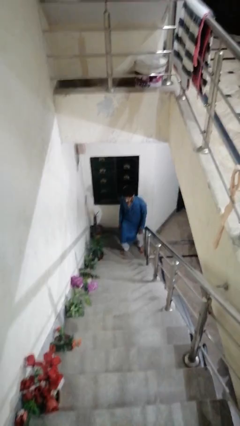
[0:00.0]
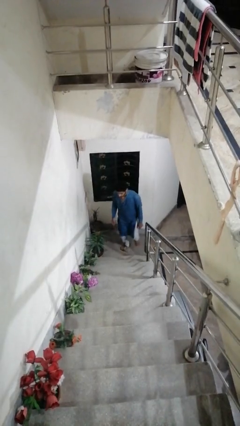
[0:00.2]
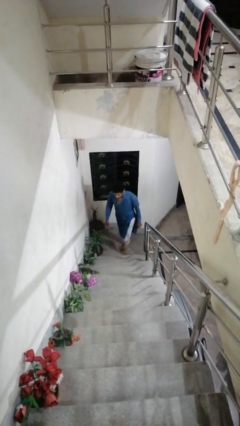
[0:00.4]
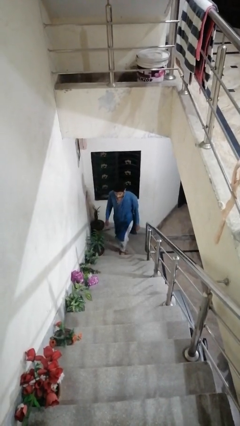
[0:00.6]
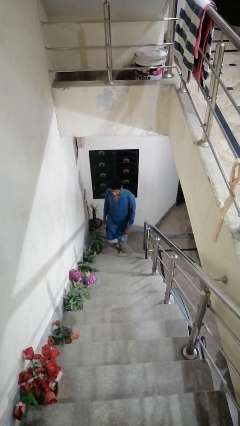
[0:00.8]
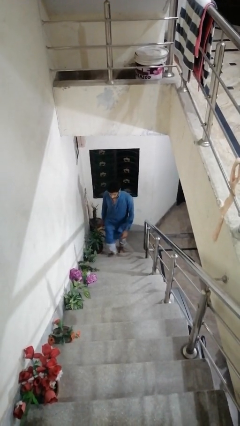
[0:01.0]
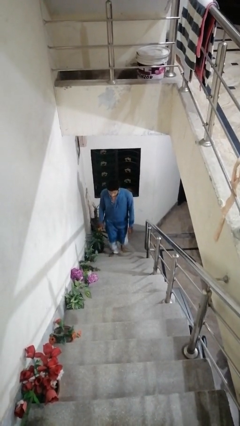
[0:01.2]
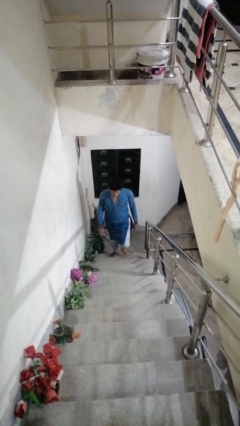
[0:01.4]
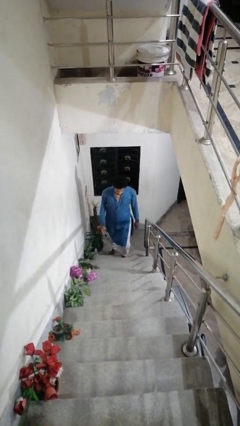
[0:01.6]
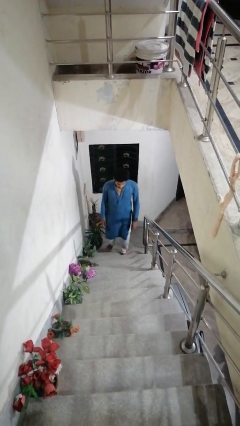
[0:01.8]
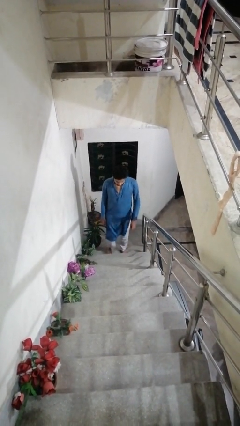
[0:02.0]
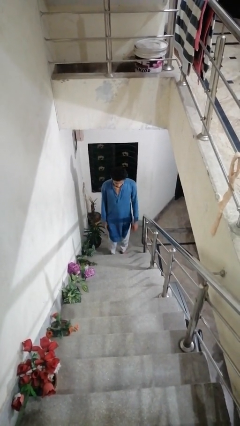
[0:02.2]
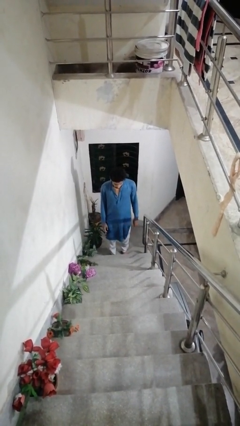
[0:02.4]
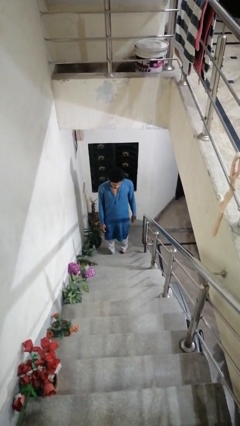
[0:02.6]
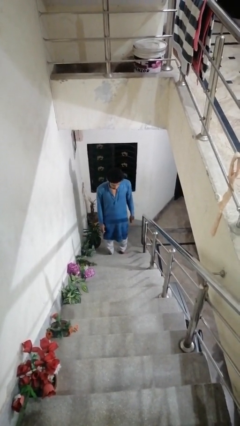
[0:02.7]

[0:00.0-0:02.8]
person climbs up stairs

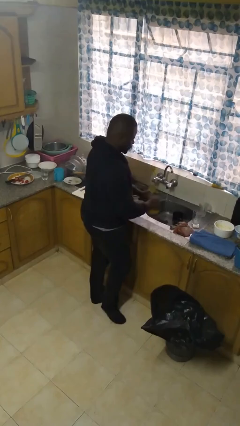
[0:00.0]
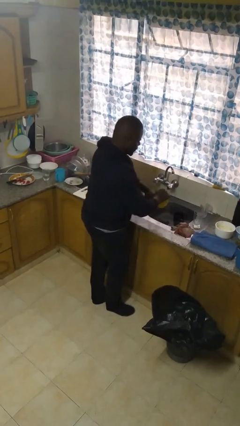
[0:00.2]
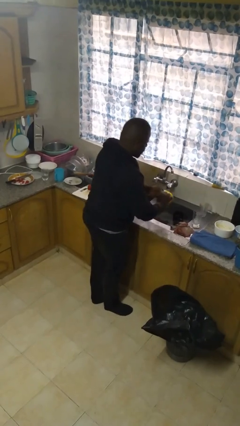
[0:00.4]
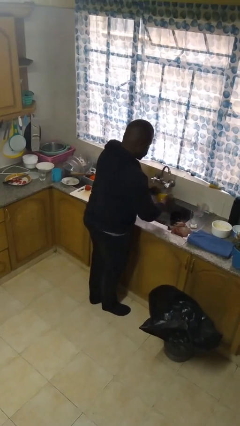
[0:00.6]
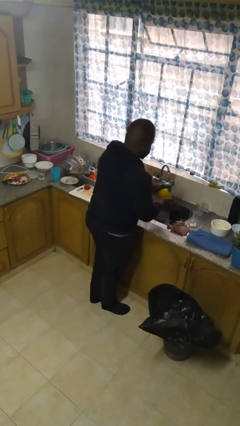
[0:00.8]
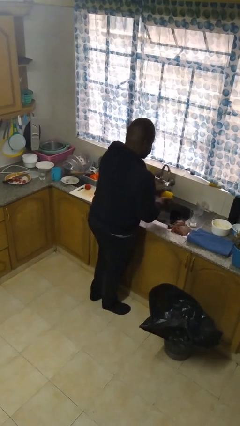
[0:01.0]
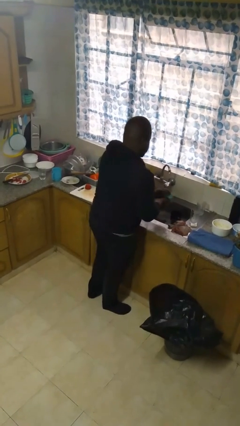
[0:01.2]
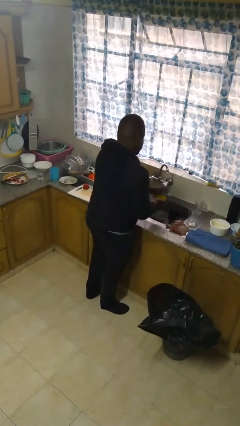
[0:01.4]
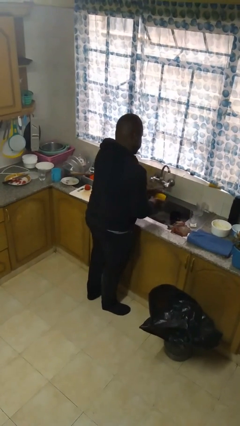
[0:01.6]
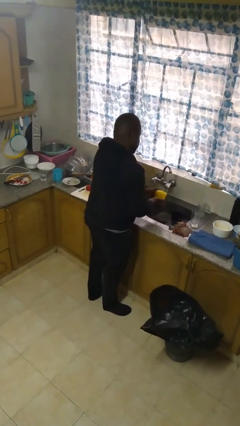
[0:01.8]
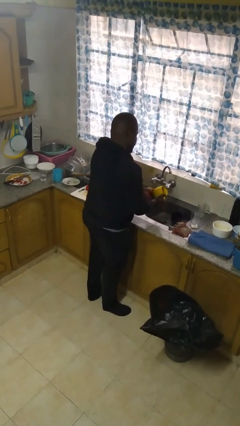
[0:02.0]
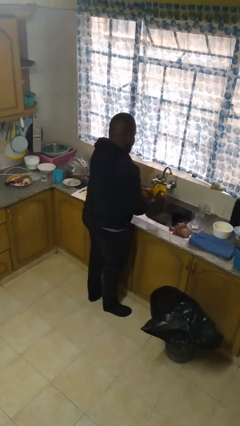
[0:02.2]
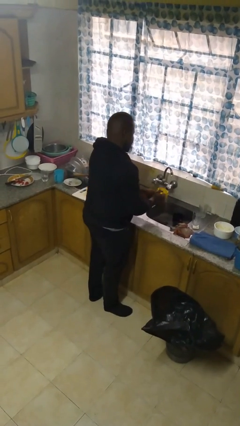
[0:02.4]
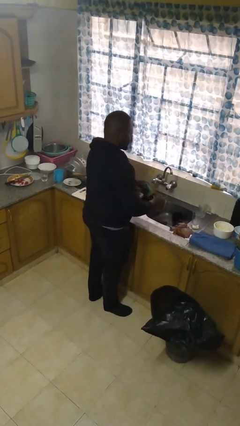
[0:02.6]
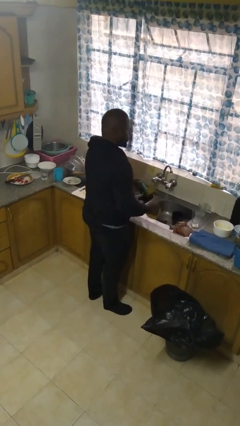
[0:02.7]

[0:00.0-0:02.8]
person washes dish

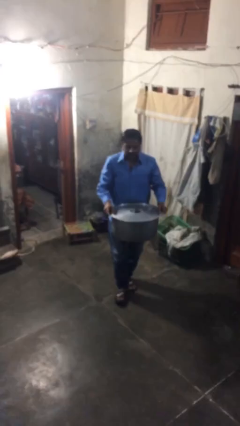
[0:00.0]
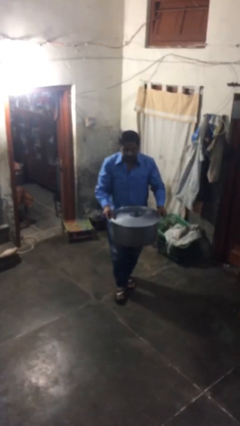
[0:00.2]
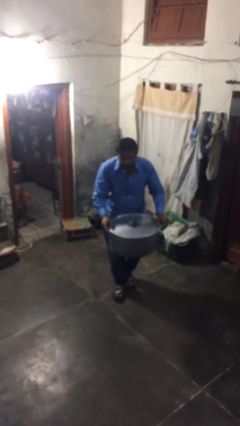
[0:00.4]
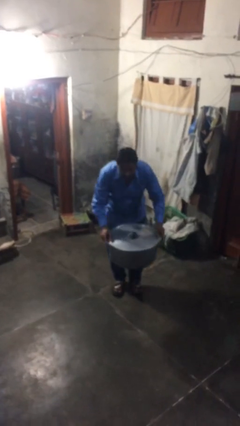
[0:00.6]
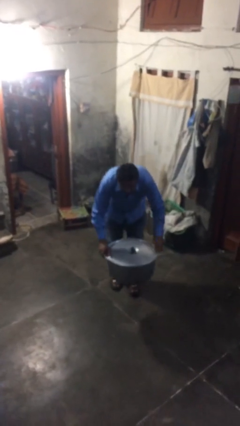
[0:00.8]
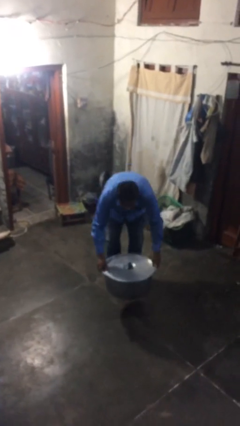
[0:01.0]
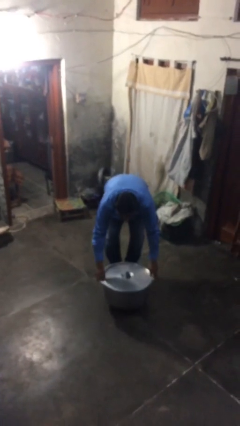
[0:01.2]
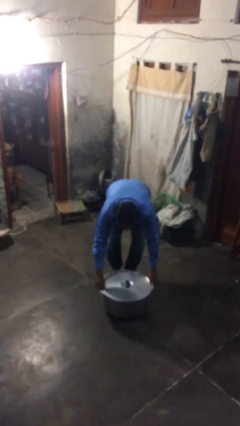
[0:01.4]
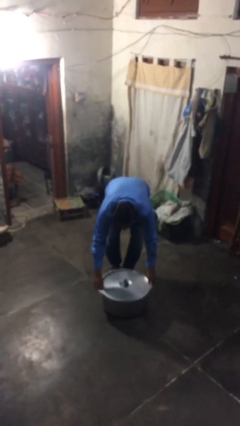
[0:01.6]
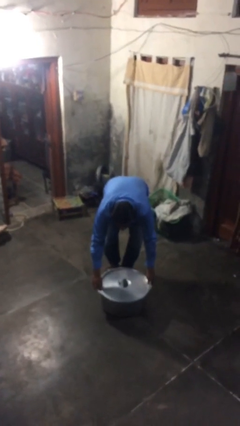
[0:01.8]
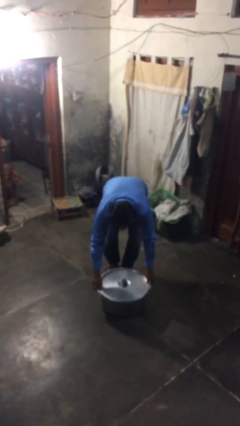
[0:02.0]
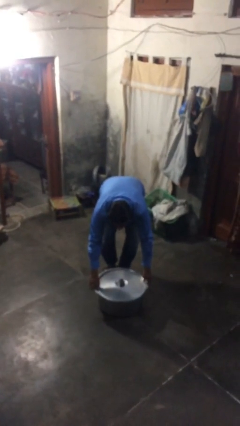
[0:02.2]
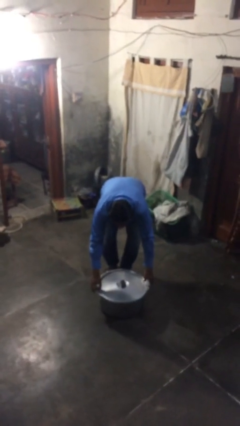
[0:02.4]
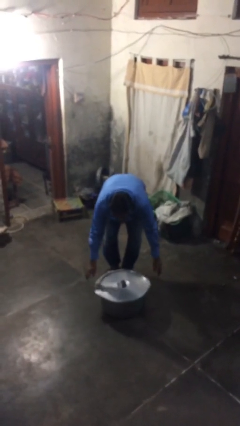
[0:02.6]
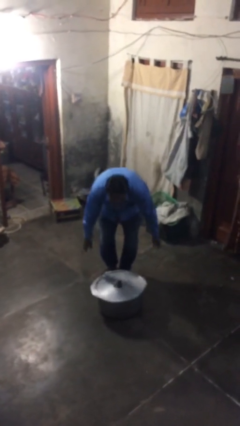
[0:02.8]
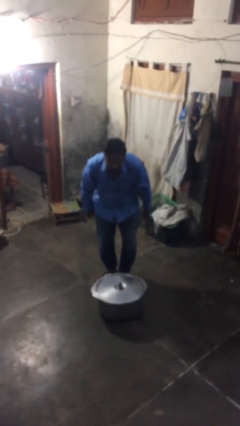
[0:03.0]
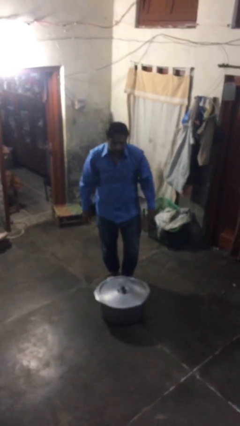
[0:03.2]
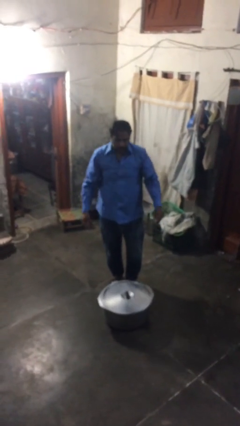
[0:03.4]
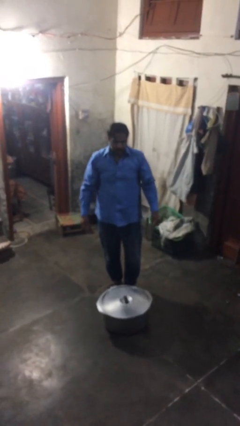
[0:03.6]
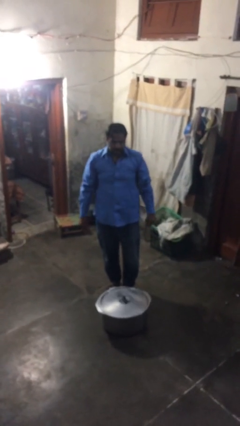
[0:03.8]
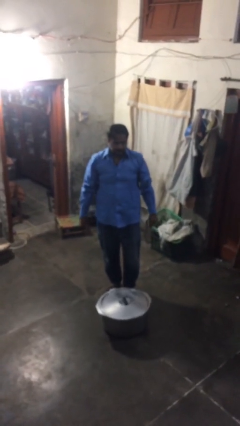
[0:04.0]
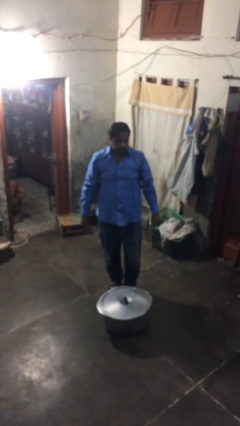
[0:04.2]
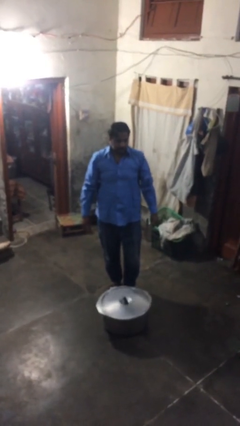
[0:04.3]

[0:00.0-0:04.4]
person puts down object on floor

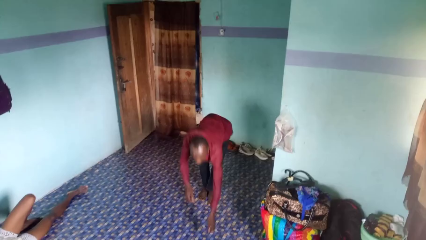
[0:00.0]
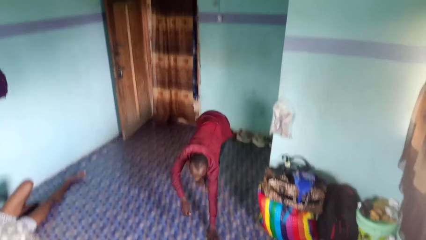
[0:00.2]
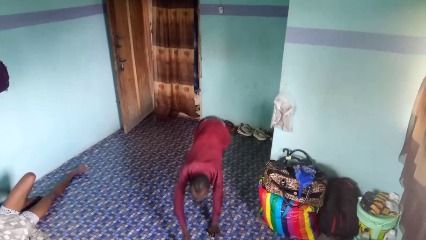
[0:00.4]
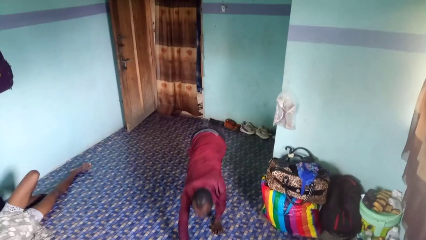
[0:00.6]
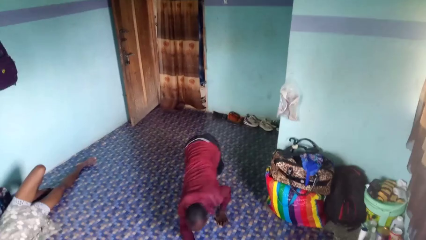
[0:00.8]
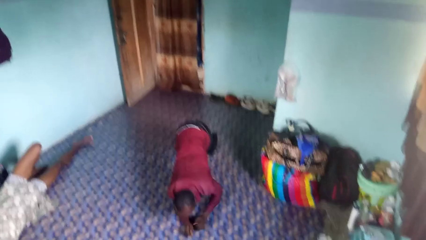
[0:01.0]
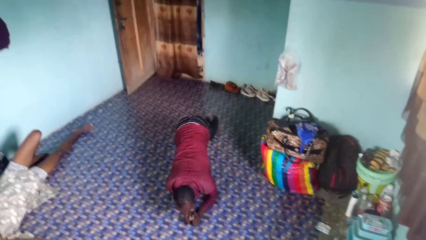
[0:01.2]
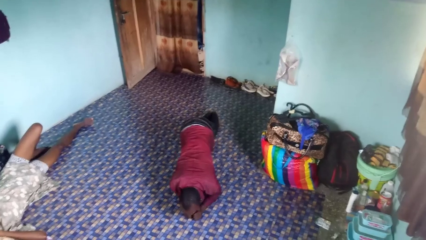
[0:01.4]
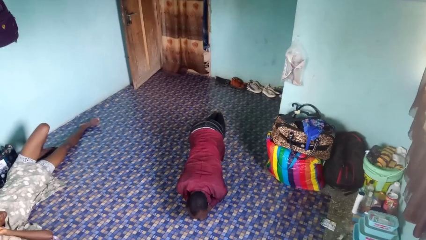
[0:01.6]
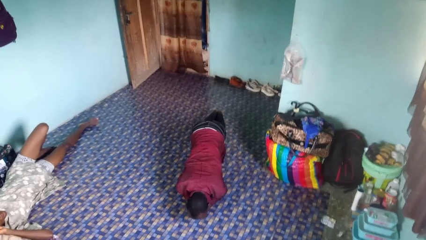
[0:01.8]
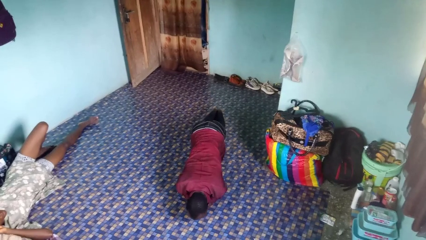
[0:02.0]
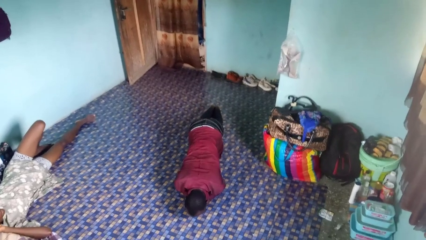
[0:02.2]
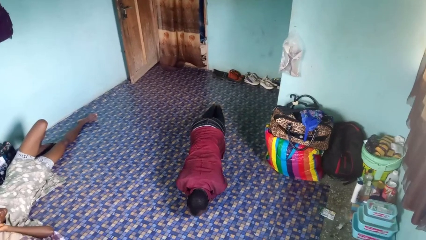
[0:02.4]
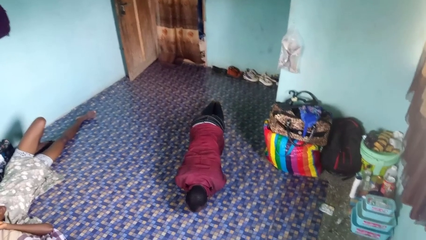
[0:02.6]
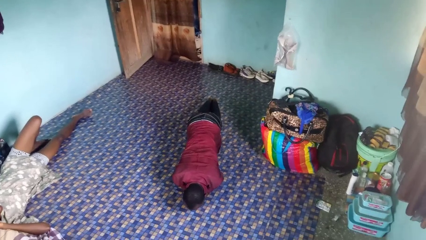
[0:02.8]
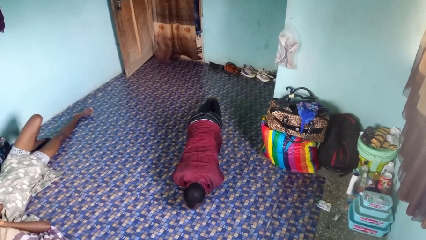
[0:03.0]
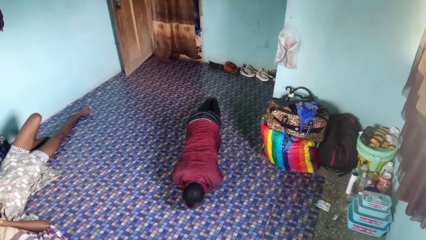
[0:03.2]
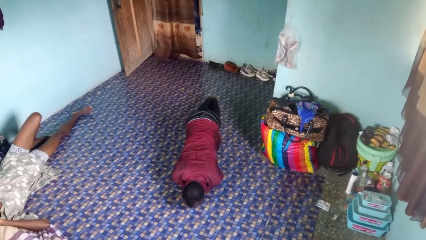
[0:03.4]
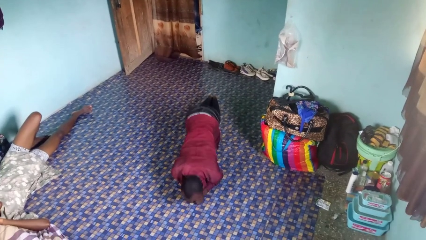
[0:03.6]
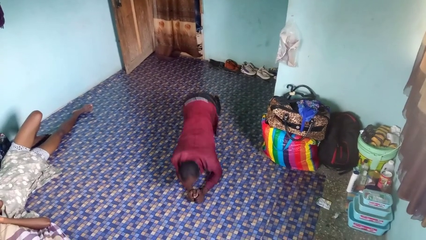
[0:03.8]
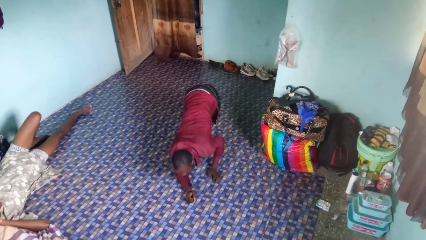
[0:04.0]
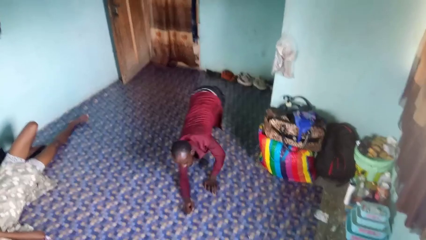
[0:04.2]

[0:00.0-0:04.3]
person exercises with plank

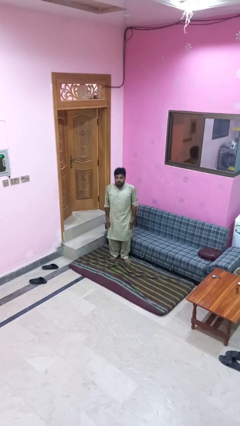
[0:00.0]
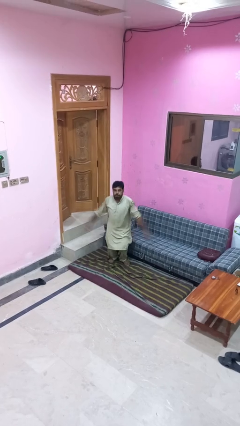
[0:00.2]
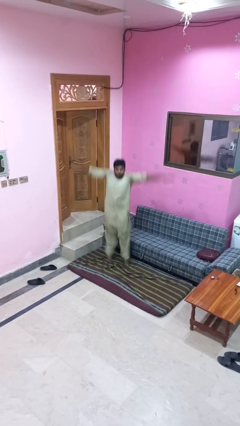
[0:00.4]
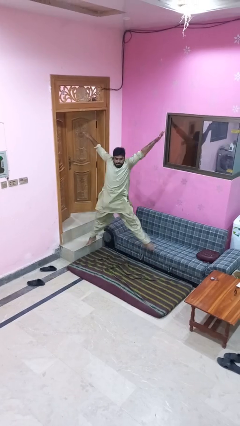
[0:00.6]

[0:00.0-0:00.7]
person exercises with jumping jacks

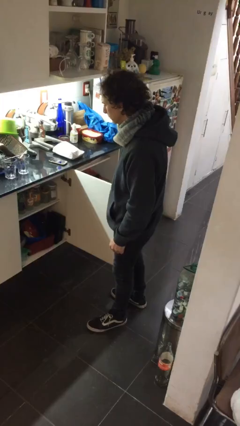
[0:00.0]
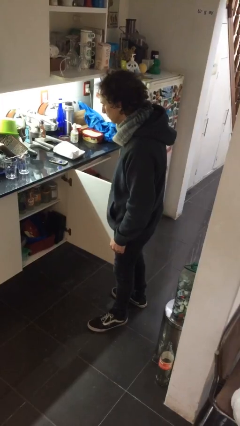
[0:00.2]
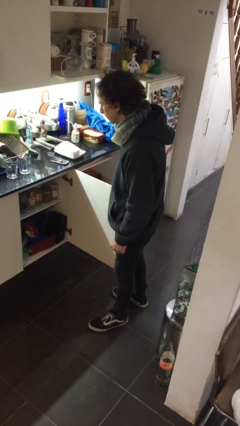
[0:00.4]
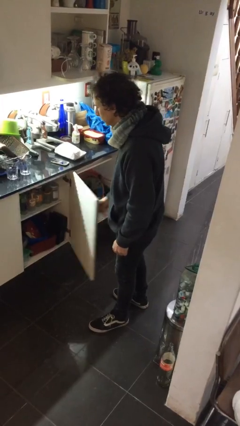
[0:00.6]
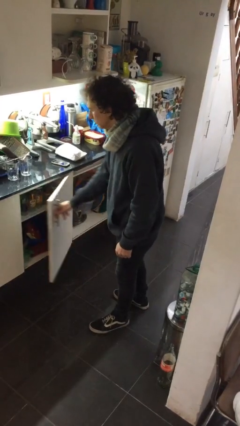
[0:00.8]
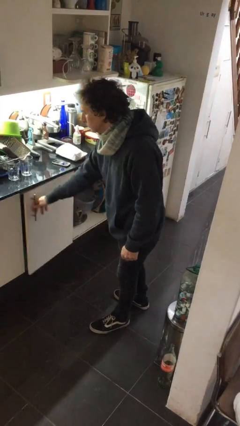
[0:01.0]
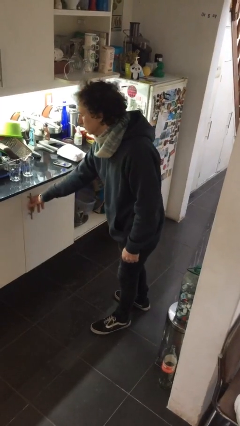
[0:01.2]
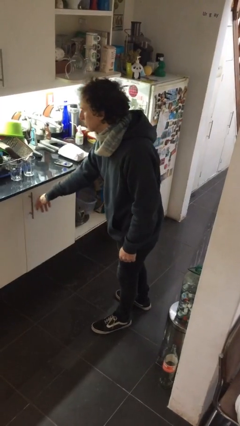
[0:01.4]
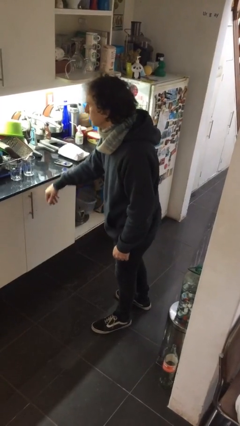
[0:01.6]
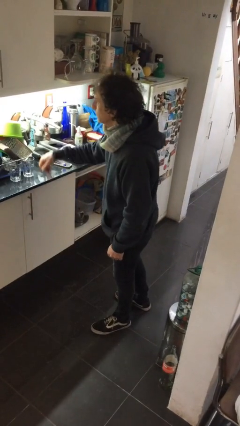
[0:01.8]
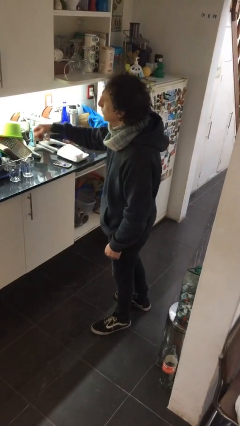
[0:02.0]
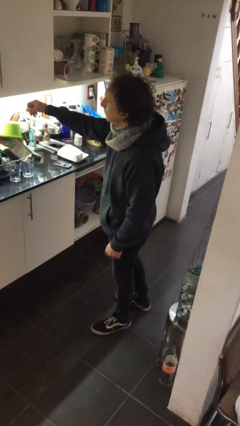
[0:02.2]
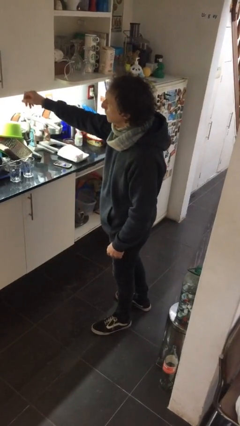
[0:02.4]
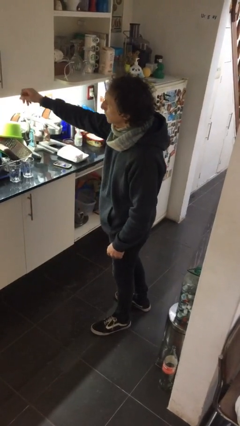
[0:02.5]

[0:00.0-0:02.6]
person closes cabinet
